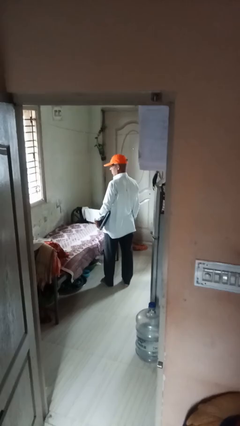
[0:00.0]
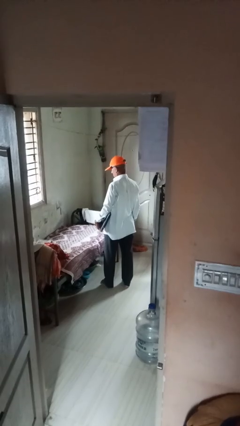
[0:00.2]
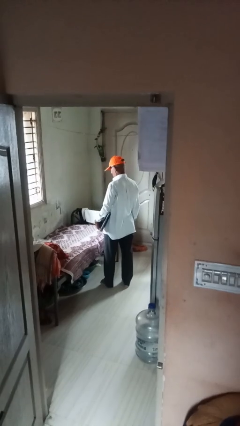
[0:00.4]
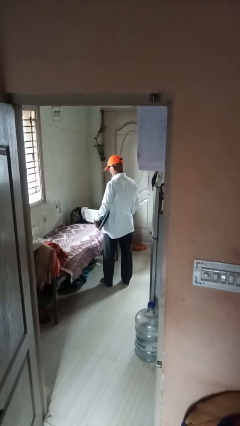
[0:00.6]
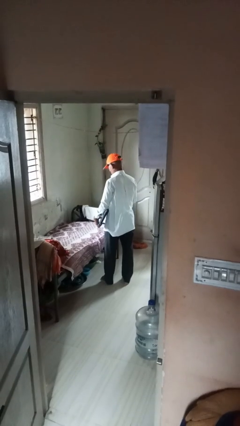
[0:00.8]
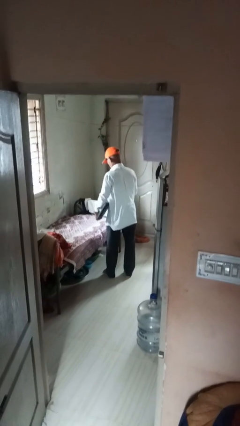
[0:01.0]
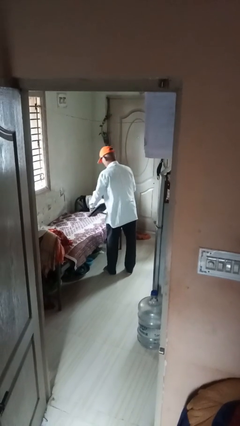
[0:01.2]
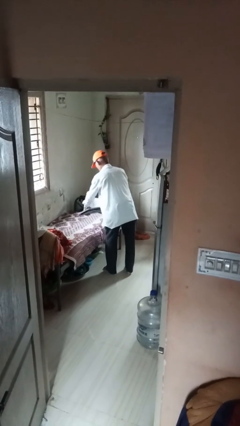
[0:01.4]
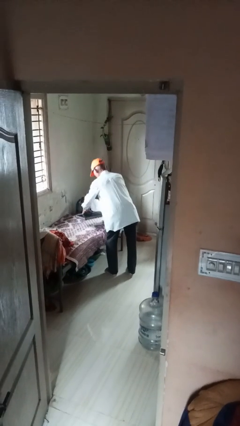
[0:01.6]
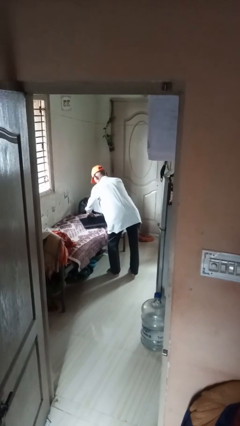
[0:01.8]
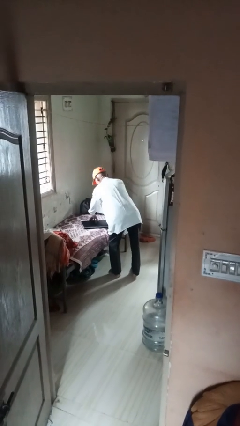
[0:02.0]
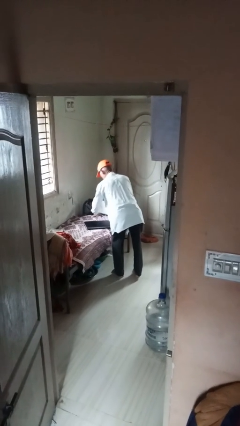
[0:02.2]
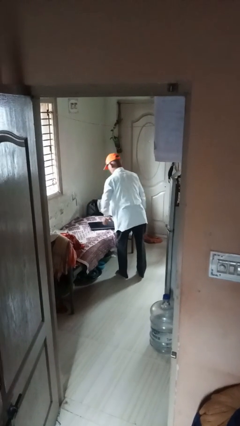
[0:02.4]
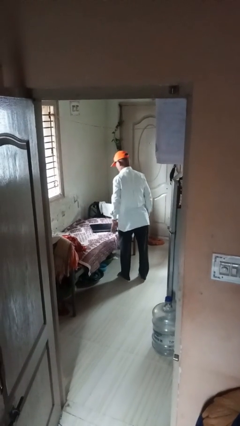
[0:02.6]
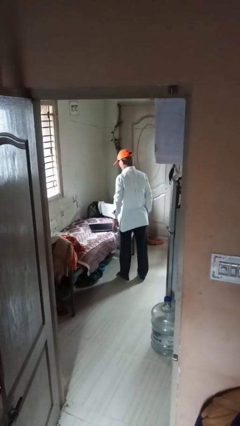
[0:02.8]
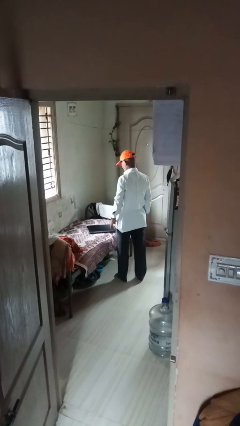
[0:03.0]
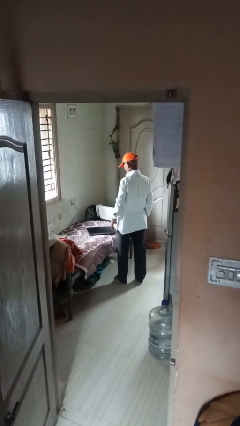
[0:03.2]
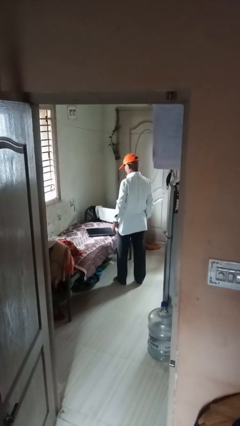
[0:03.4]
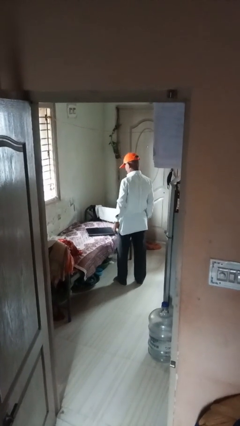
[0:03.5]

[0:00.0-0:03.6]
person puts down object on bed

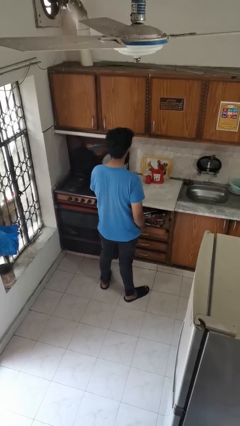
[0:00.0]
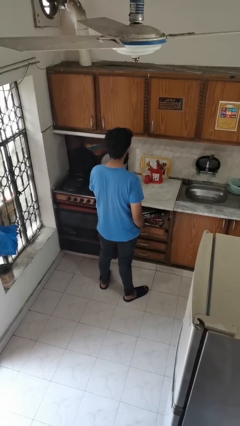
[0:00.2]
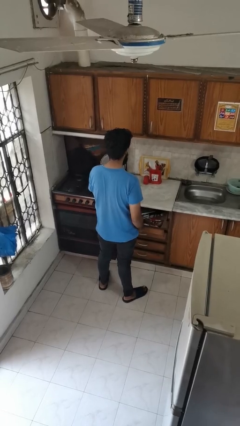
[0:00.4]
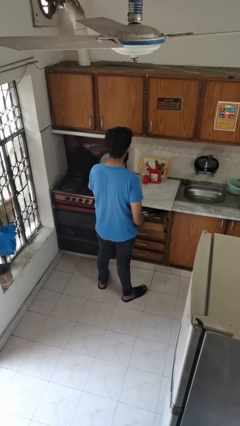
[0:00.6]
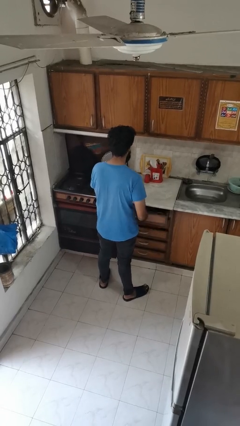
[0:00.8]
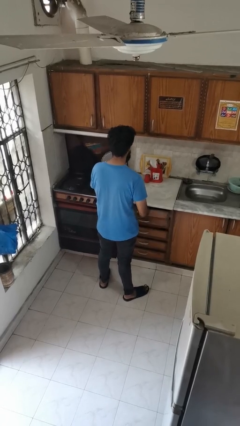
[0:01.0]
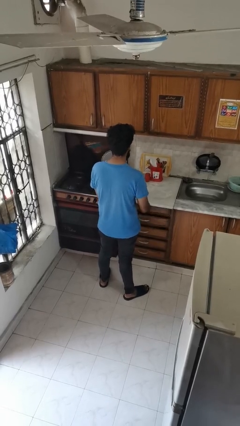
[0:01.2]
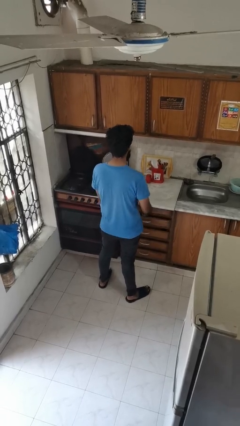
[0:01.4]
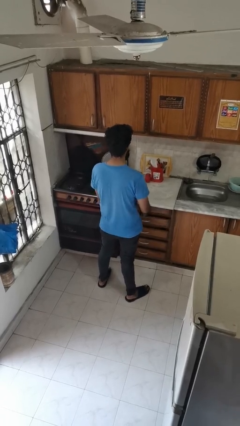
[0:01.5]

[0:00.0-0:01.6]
person closes kitchen drawer

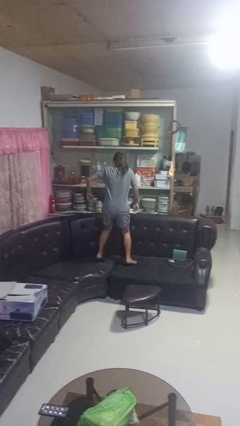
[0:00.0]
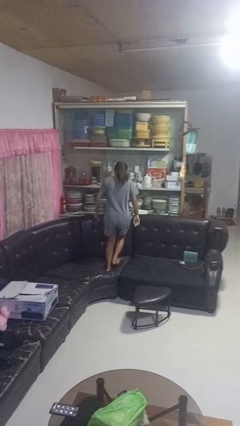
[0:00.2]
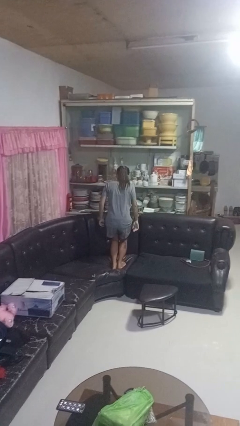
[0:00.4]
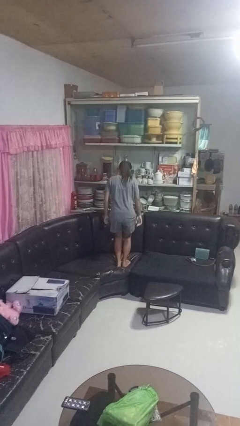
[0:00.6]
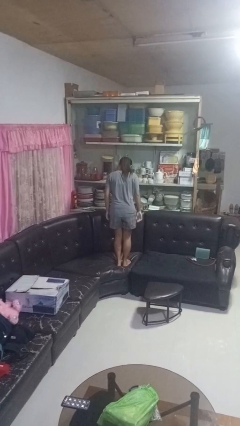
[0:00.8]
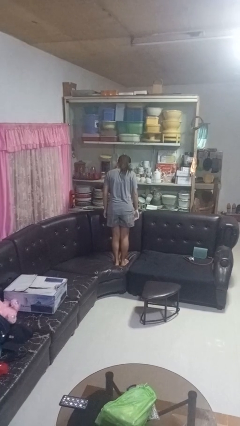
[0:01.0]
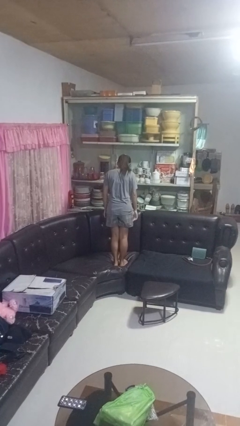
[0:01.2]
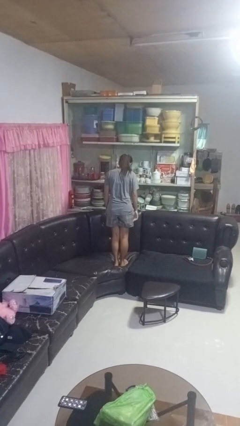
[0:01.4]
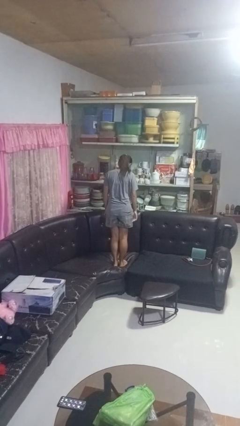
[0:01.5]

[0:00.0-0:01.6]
person jumps on couch

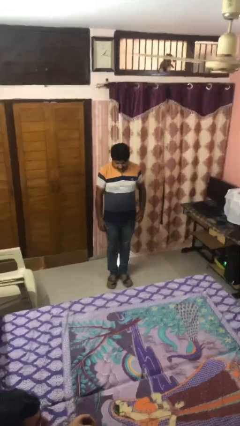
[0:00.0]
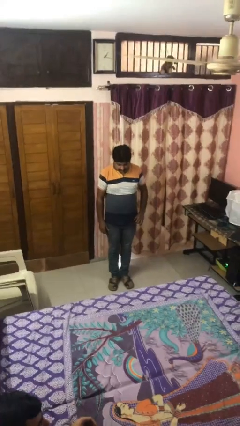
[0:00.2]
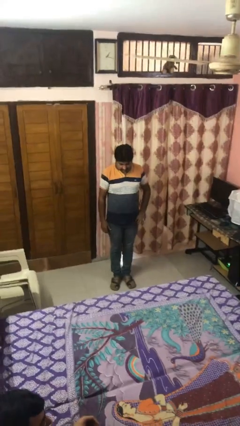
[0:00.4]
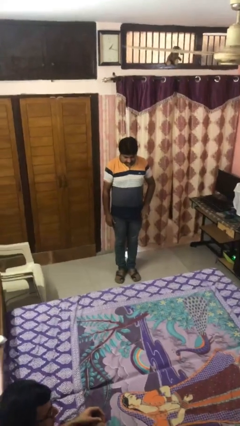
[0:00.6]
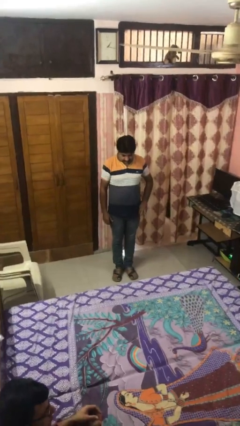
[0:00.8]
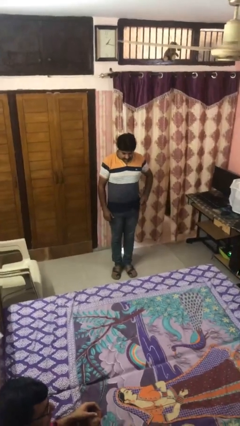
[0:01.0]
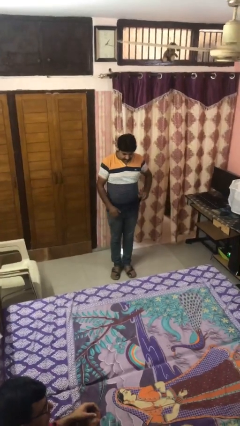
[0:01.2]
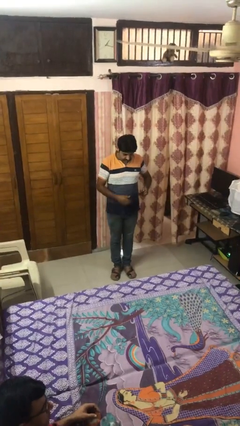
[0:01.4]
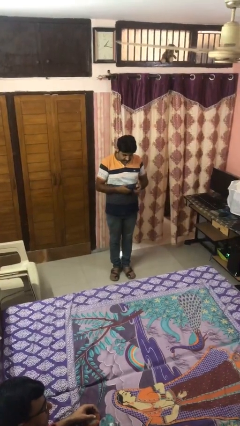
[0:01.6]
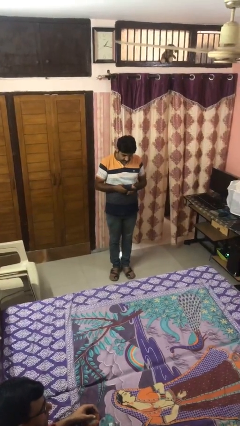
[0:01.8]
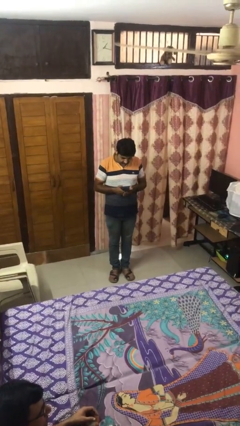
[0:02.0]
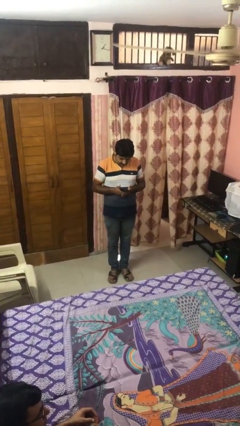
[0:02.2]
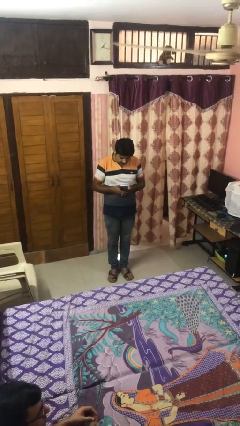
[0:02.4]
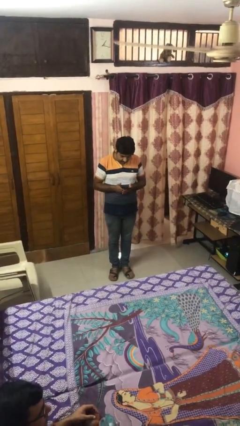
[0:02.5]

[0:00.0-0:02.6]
person takes phone from pocket

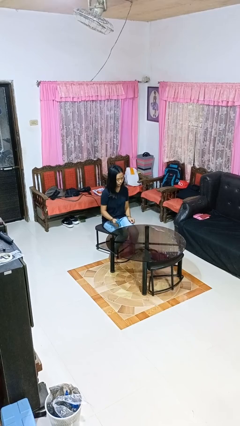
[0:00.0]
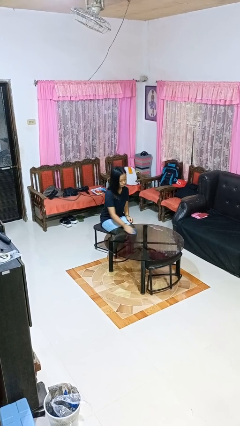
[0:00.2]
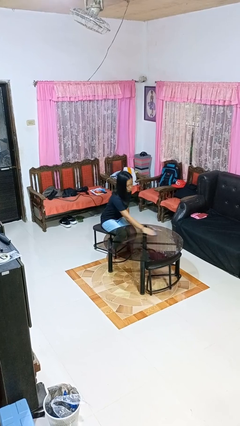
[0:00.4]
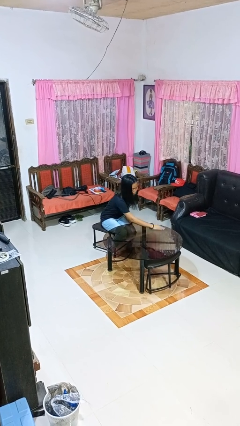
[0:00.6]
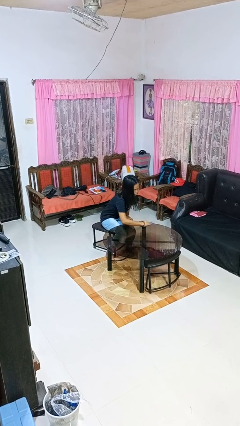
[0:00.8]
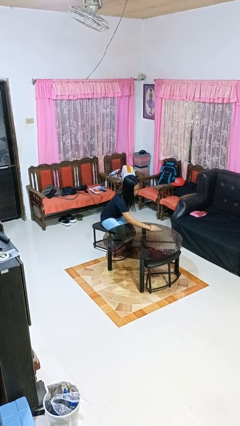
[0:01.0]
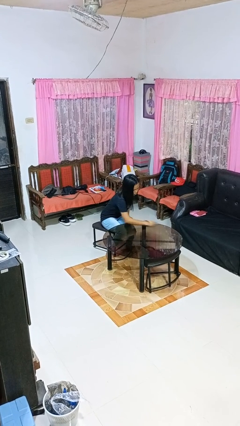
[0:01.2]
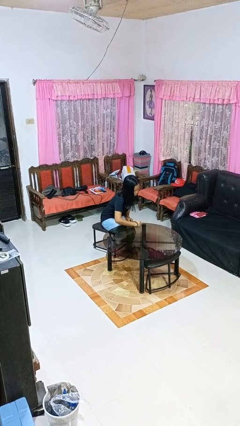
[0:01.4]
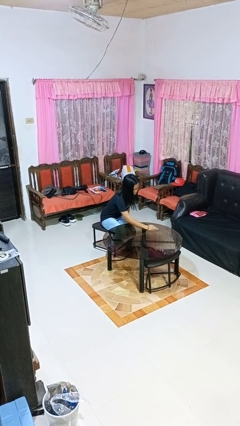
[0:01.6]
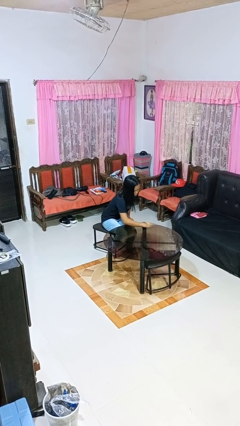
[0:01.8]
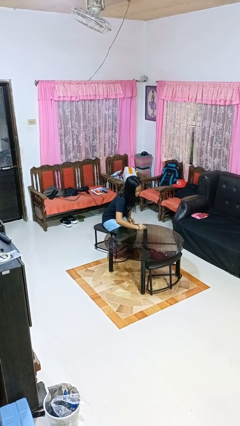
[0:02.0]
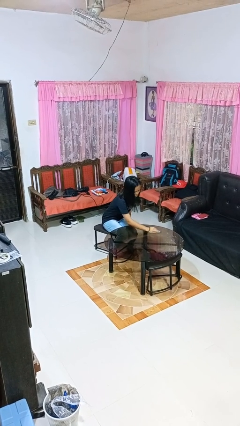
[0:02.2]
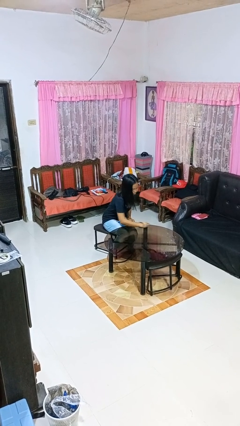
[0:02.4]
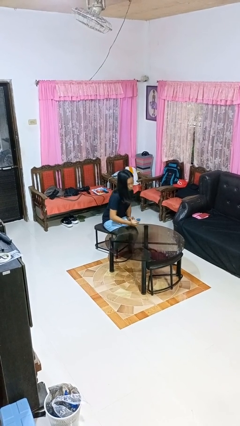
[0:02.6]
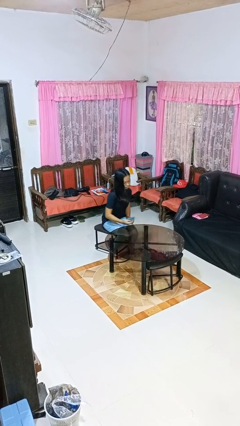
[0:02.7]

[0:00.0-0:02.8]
person cleans table with rag

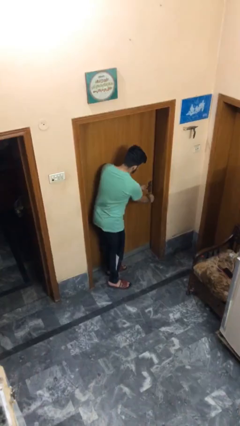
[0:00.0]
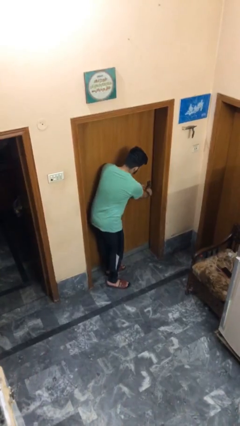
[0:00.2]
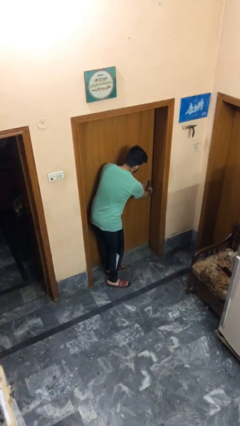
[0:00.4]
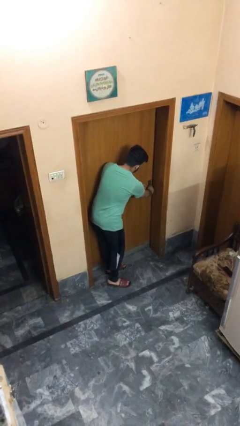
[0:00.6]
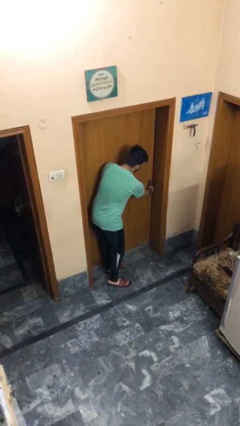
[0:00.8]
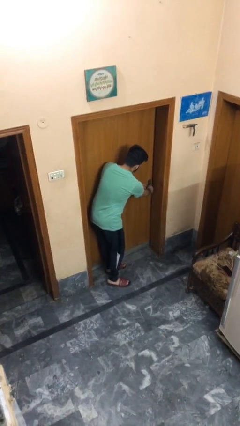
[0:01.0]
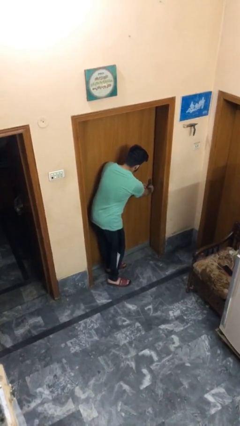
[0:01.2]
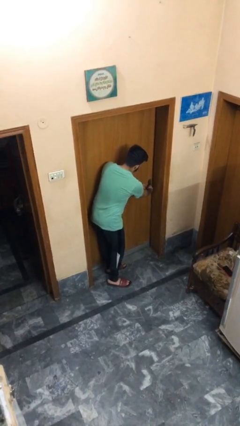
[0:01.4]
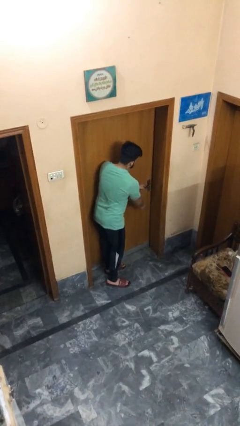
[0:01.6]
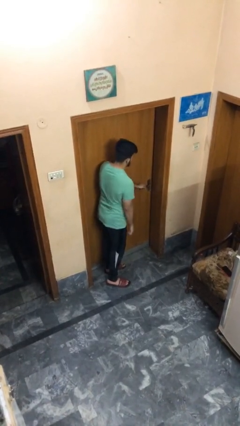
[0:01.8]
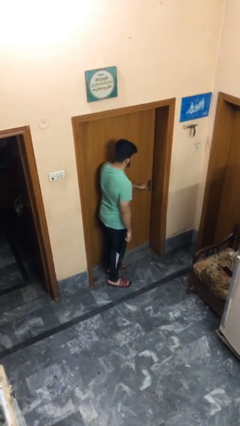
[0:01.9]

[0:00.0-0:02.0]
person locks door with keys

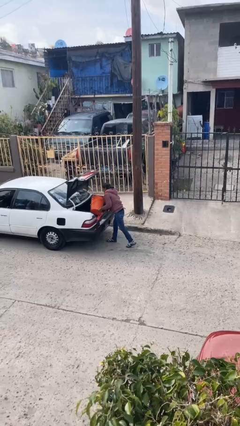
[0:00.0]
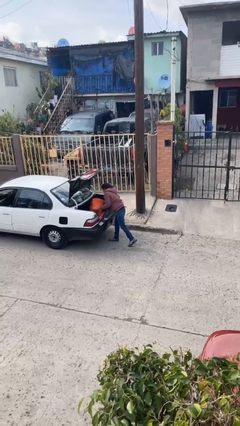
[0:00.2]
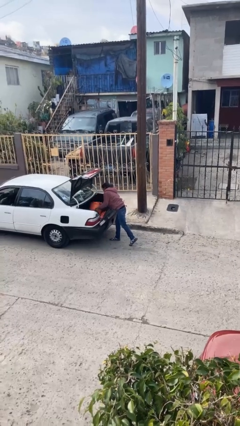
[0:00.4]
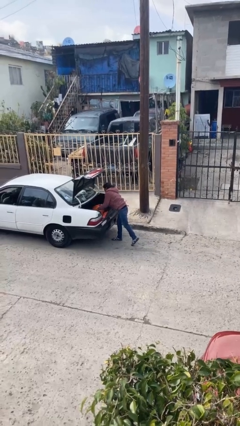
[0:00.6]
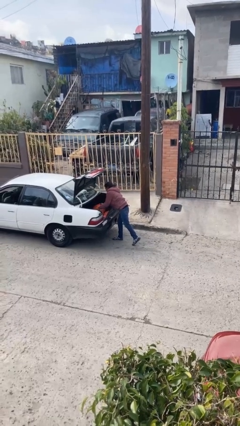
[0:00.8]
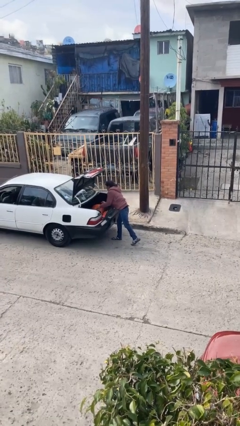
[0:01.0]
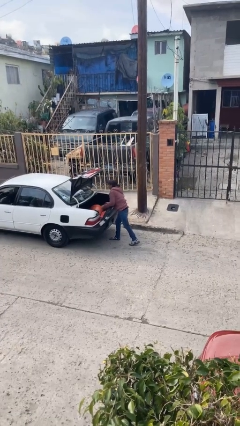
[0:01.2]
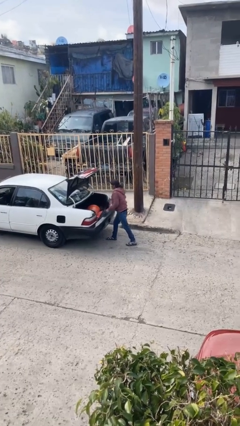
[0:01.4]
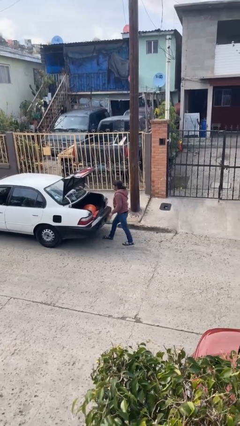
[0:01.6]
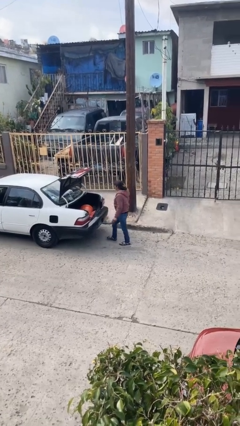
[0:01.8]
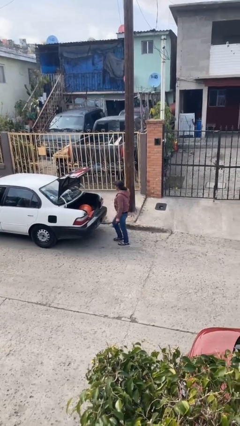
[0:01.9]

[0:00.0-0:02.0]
person loads car

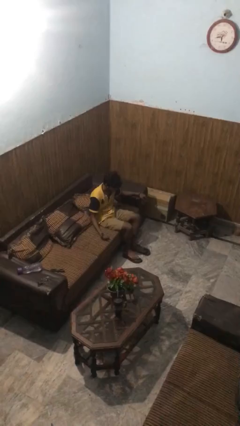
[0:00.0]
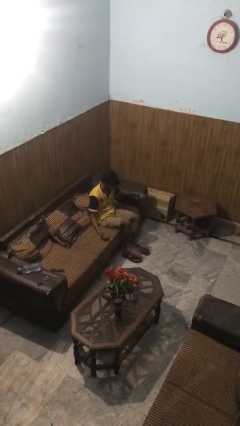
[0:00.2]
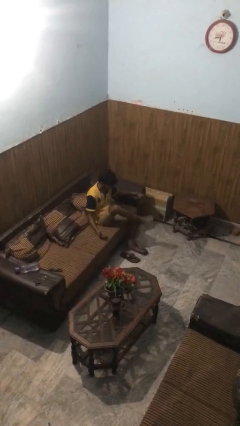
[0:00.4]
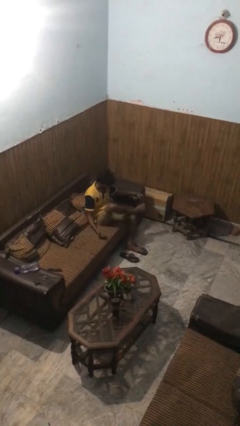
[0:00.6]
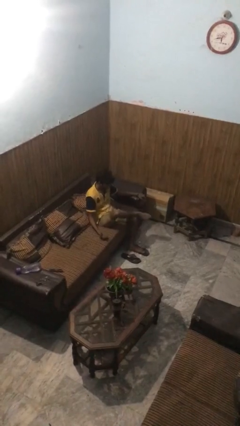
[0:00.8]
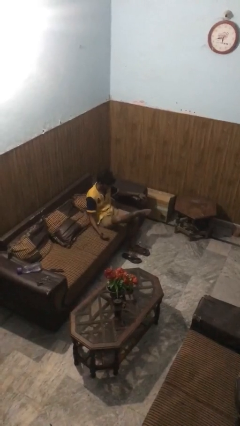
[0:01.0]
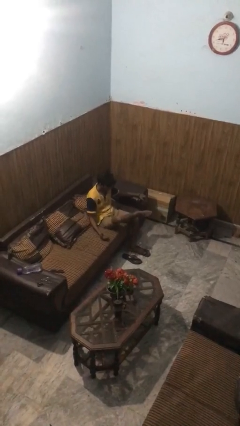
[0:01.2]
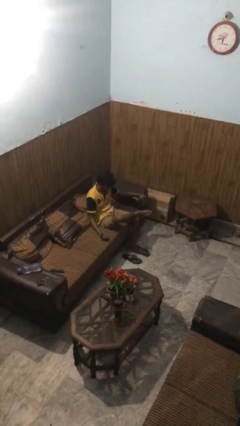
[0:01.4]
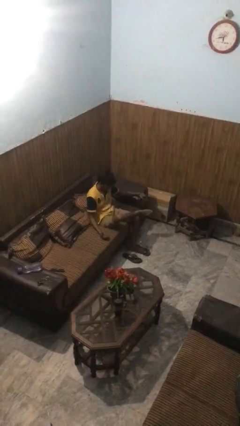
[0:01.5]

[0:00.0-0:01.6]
person crosses legs
